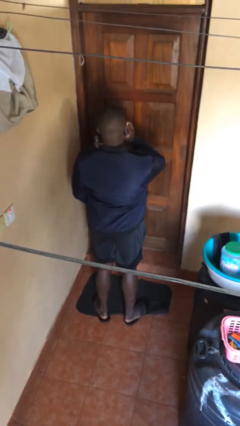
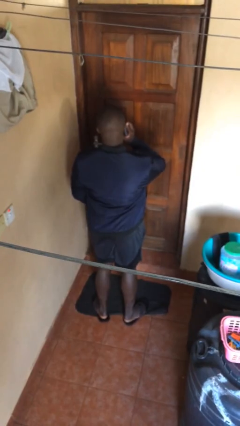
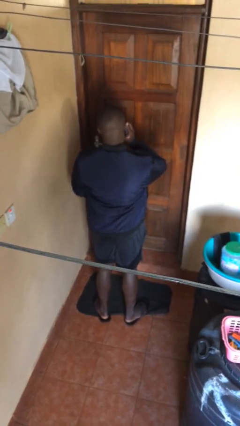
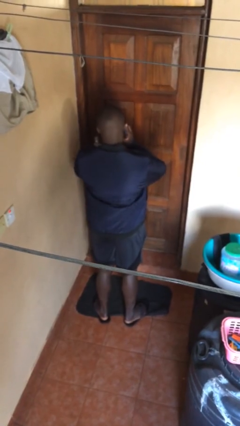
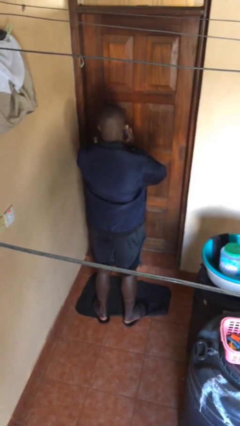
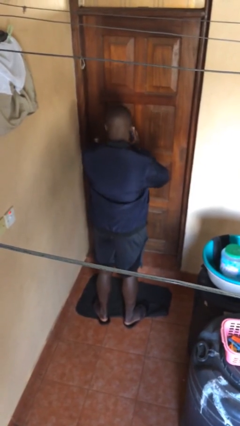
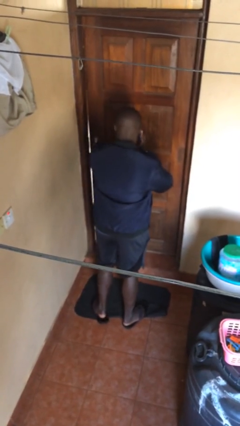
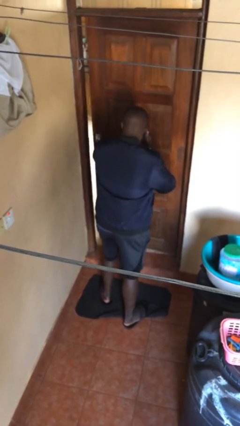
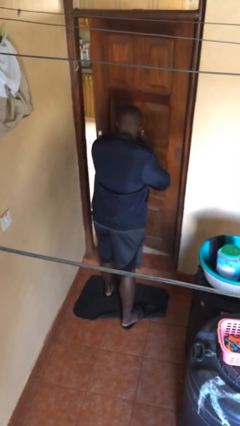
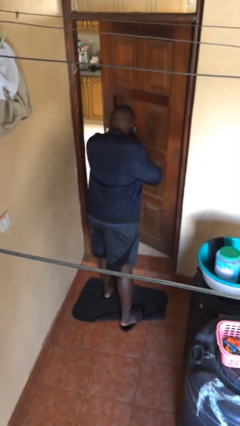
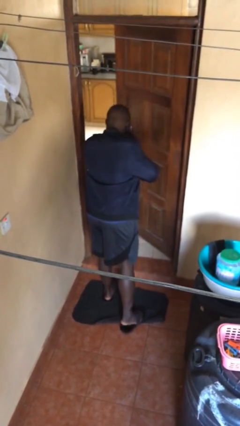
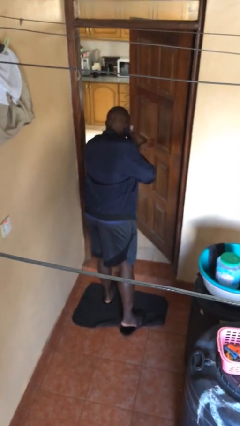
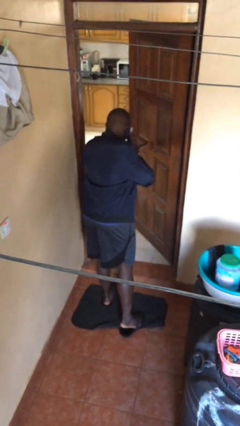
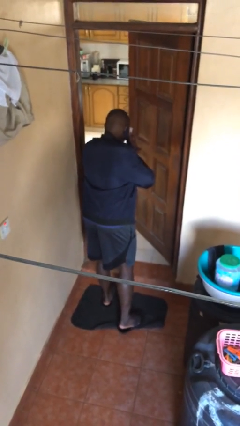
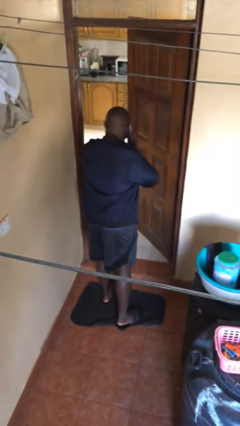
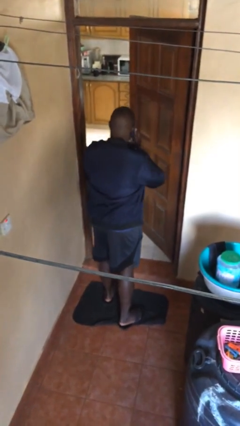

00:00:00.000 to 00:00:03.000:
person opens facility door

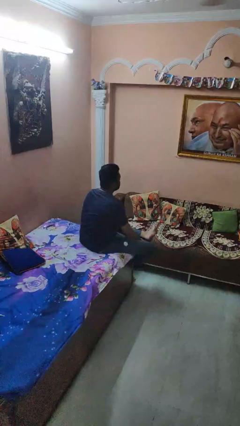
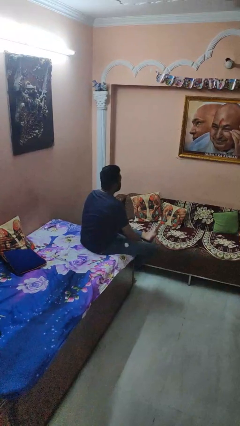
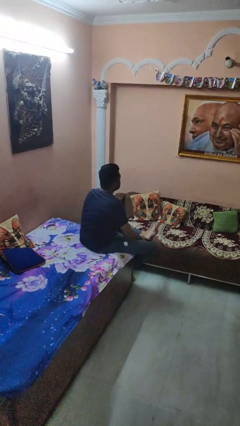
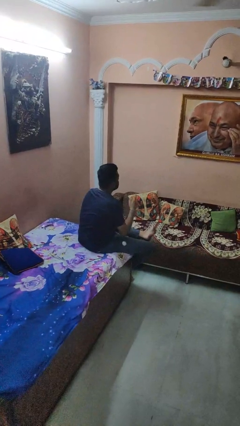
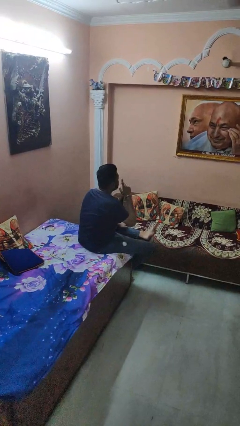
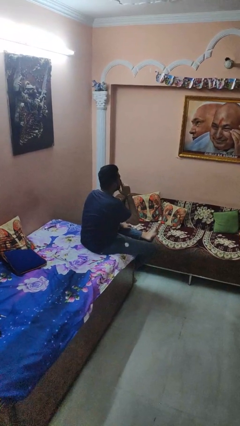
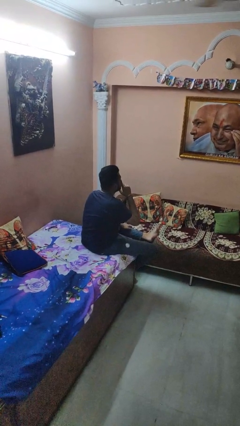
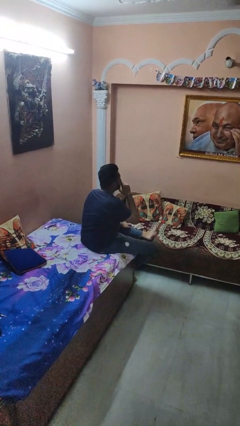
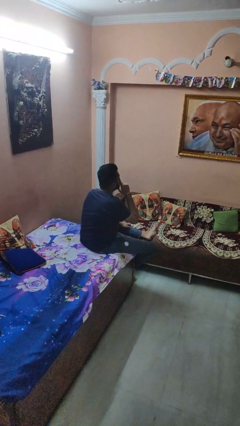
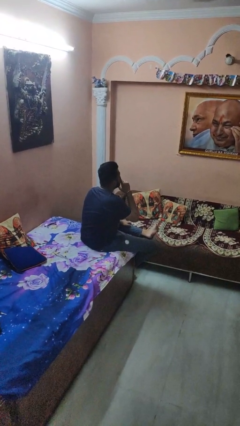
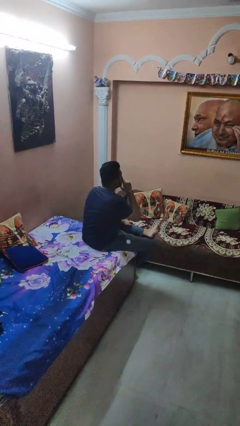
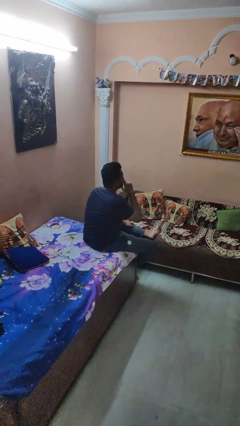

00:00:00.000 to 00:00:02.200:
person gestures be quiet

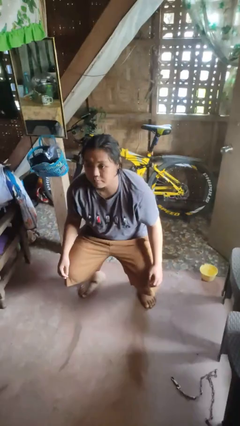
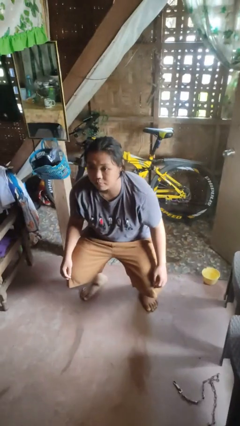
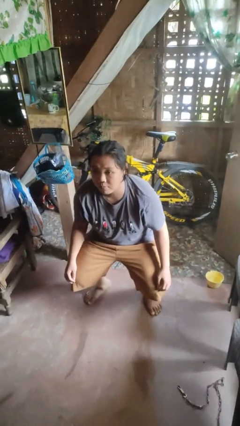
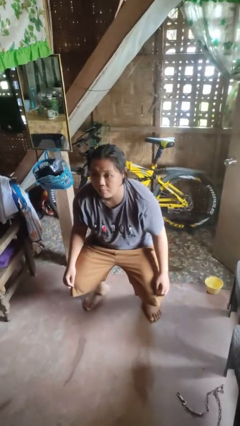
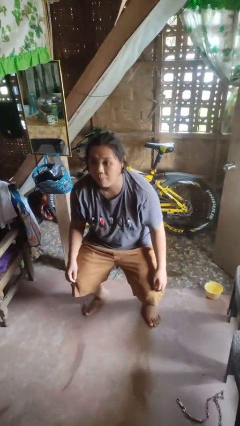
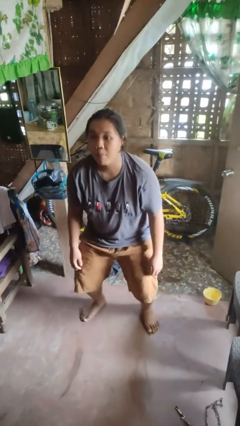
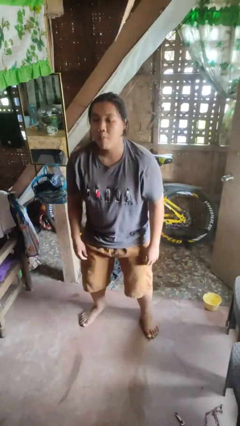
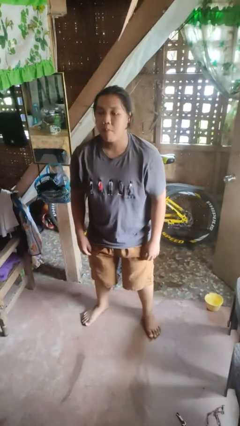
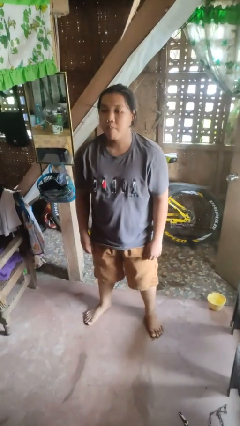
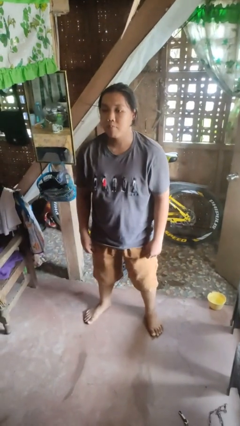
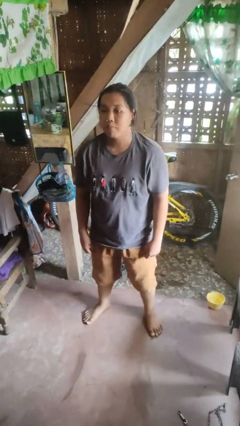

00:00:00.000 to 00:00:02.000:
person stands up

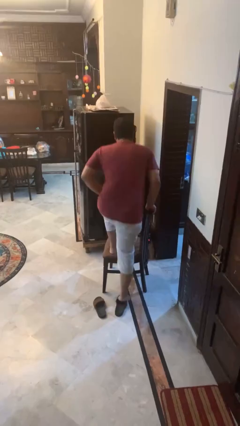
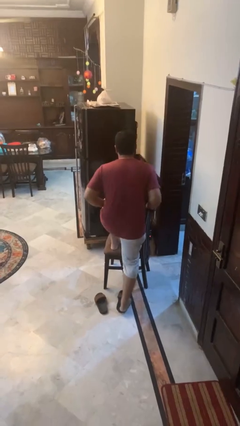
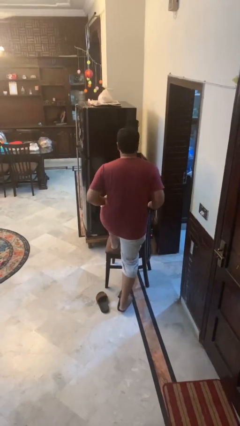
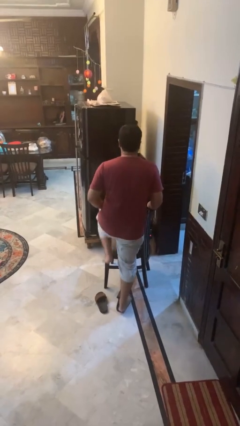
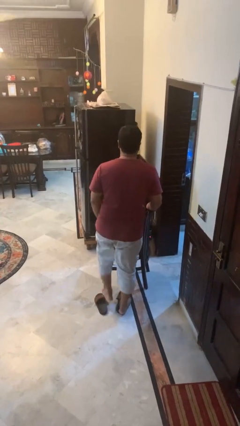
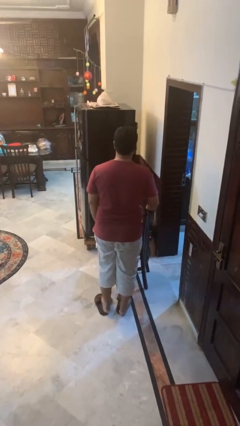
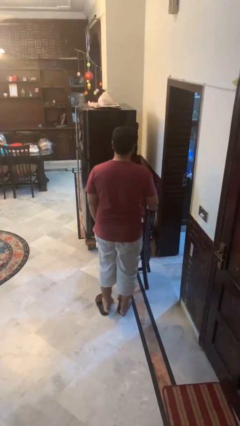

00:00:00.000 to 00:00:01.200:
person climbs off chair

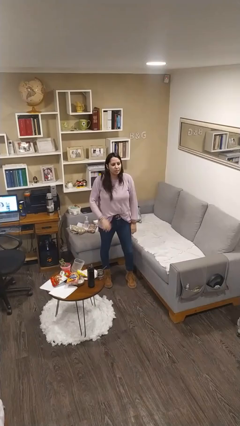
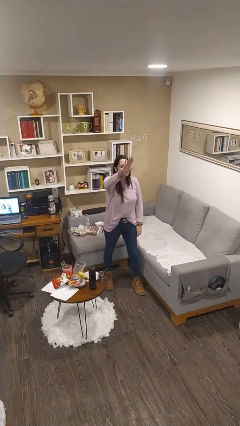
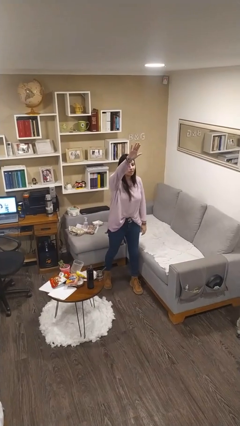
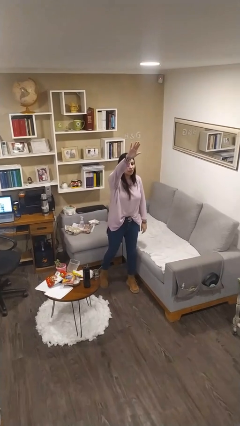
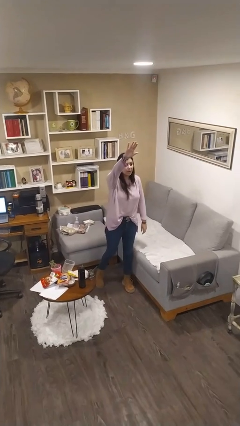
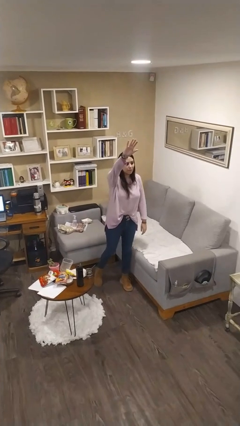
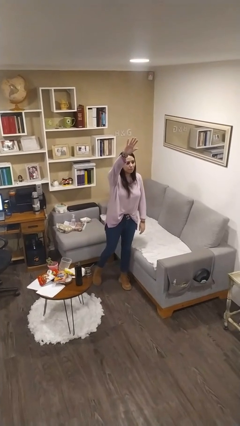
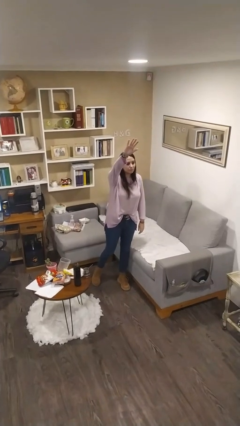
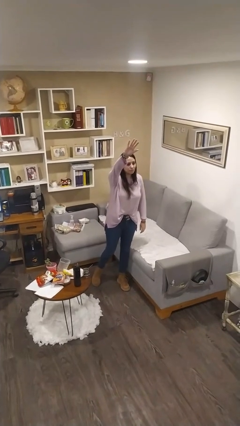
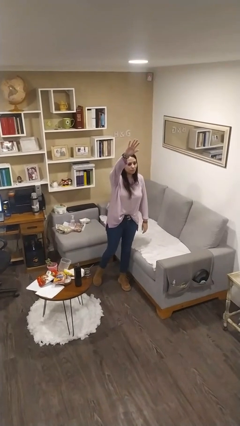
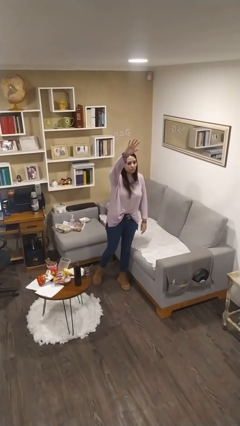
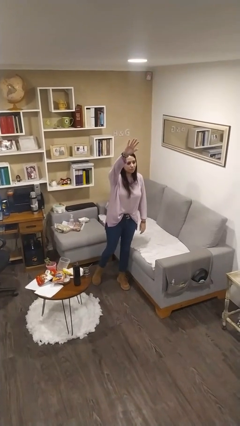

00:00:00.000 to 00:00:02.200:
person gestures raise hand

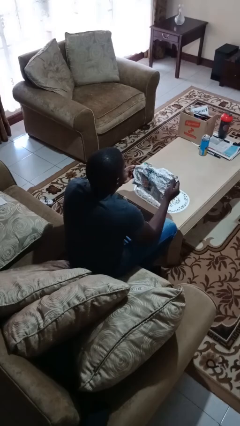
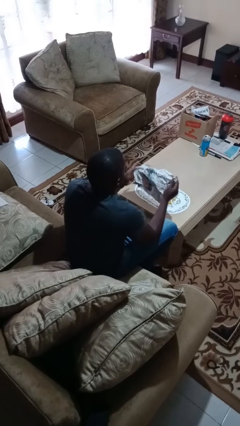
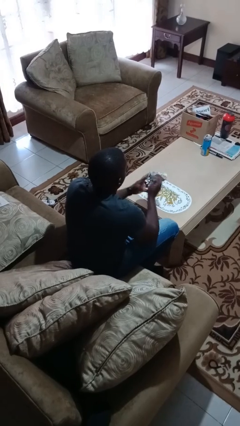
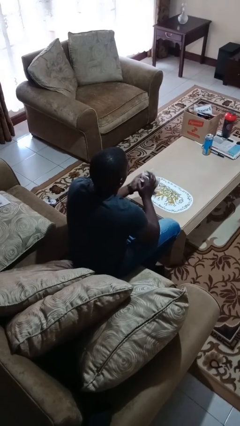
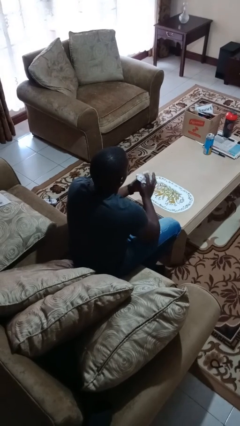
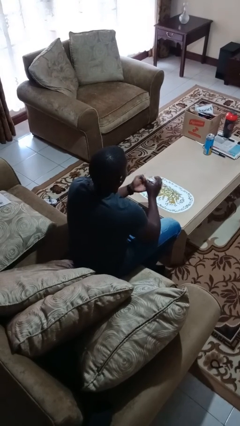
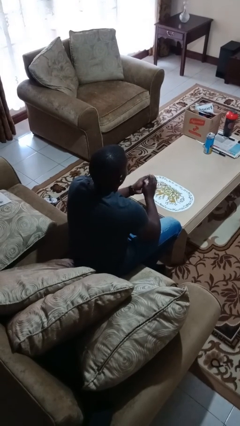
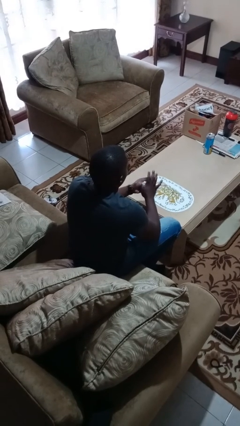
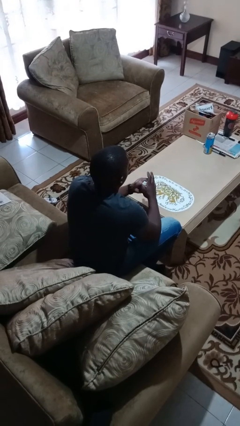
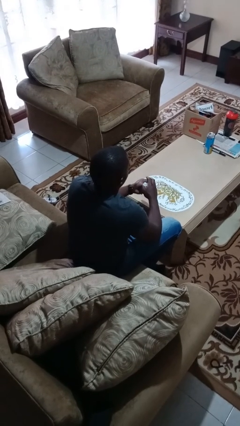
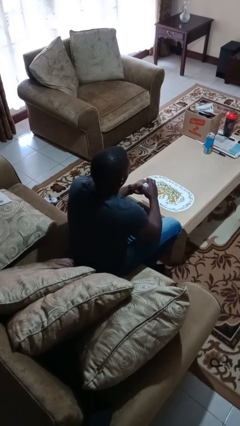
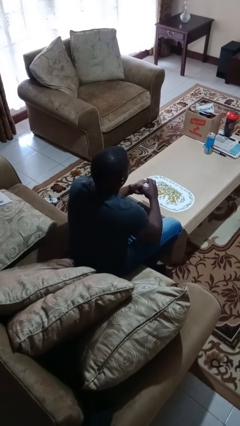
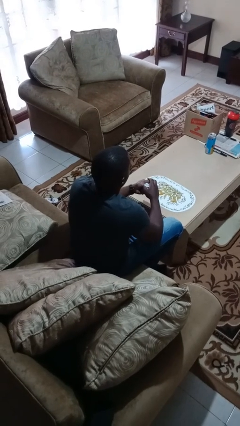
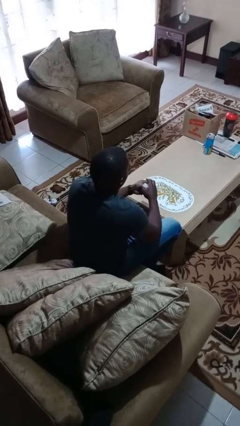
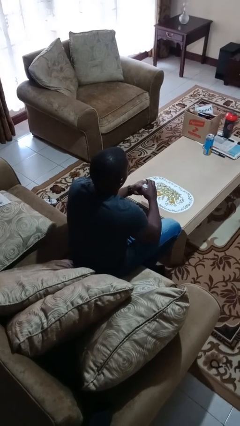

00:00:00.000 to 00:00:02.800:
person crumples paper

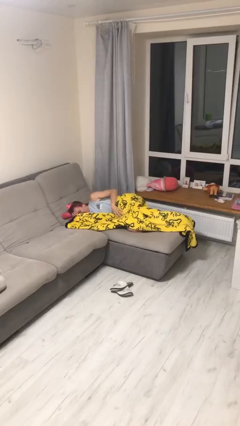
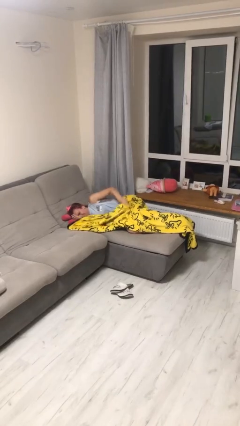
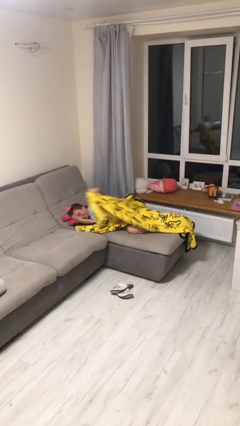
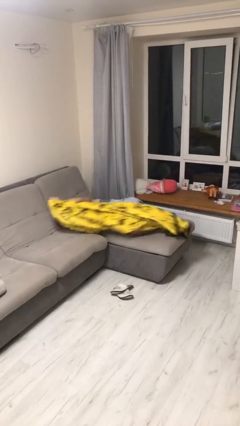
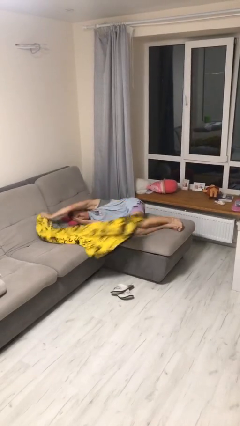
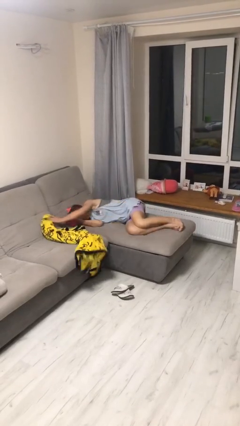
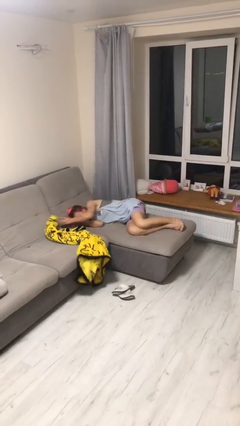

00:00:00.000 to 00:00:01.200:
person uncovers with bedsheets
